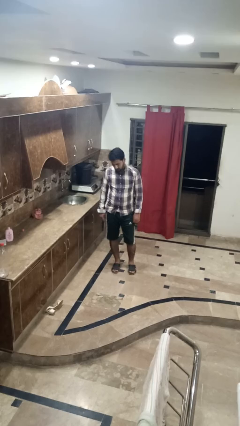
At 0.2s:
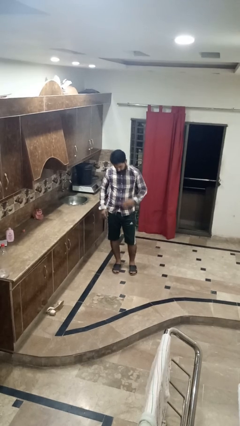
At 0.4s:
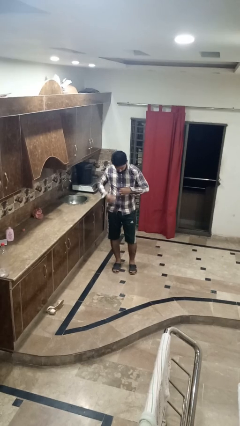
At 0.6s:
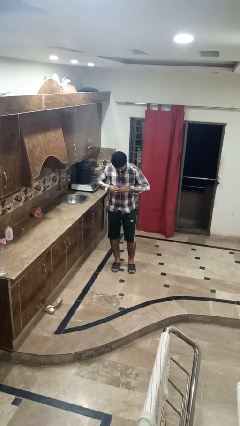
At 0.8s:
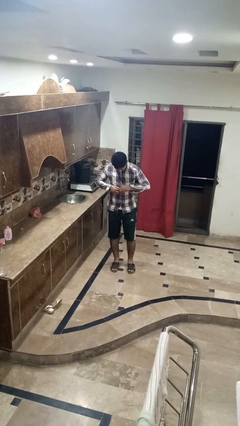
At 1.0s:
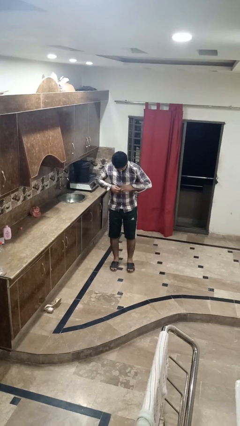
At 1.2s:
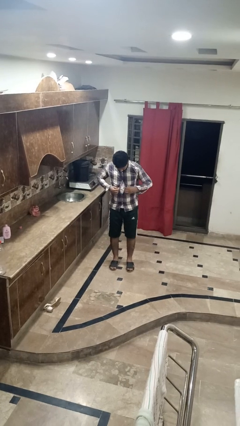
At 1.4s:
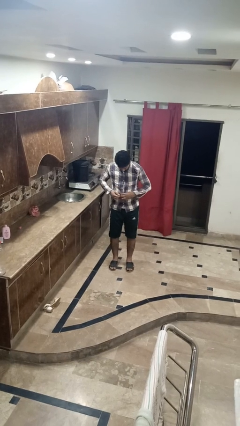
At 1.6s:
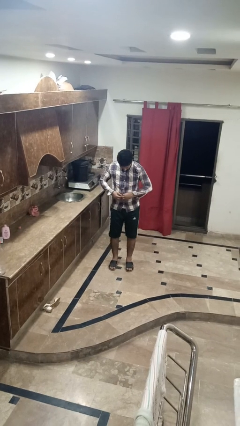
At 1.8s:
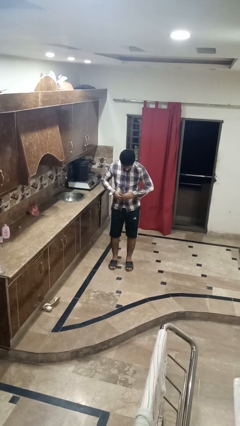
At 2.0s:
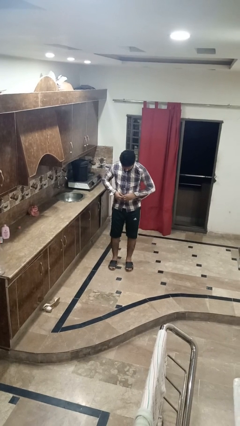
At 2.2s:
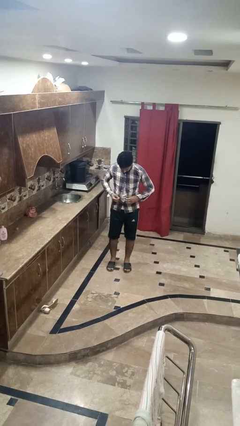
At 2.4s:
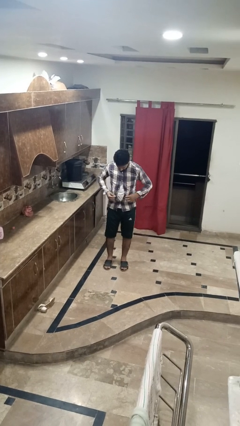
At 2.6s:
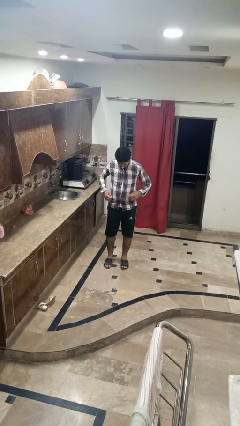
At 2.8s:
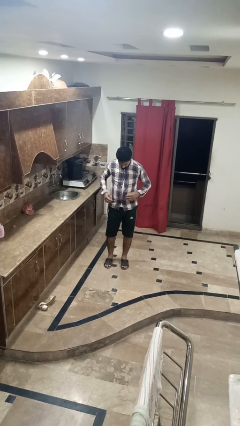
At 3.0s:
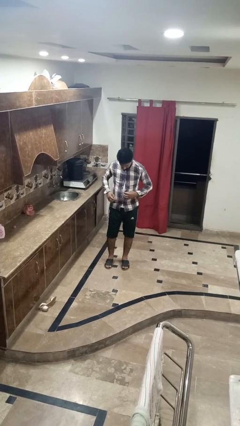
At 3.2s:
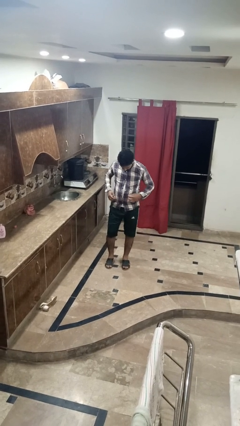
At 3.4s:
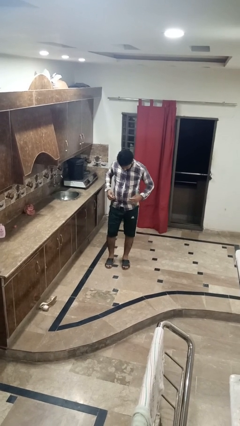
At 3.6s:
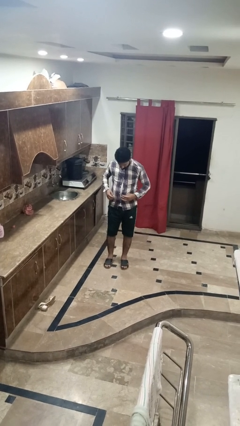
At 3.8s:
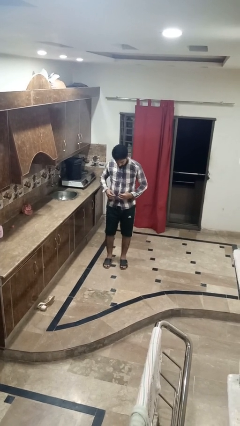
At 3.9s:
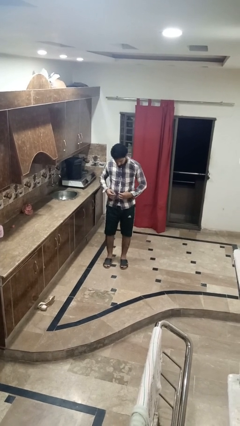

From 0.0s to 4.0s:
person unbuttons shirt

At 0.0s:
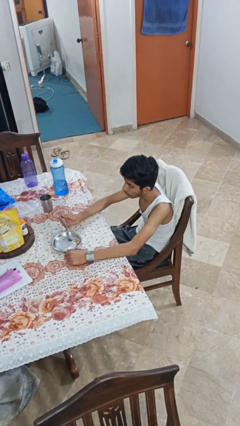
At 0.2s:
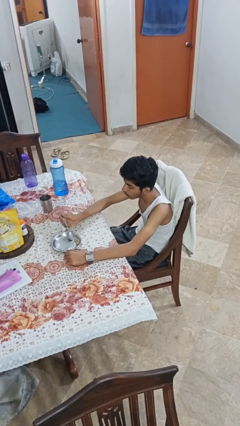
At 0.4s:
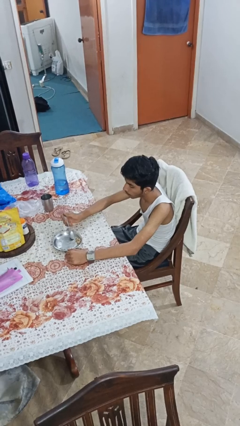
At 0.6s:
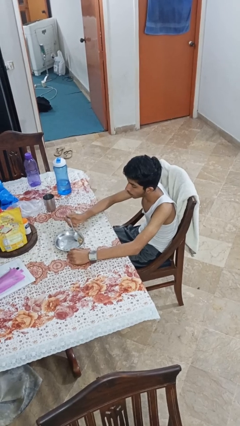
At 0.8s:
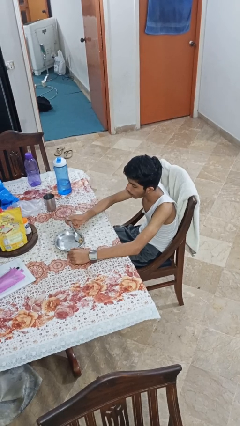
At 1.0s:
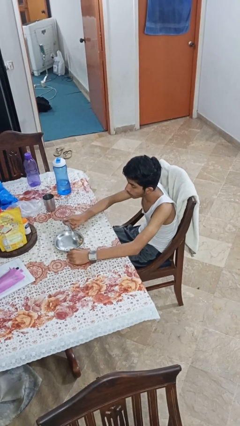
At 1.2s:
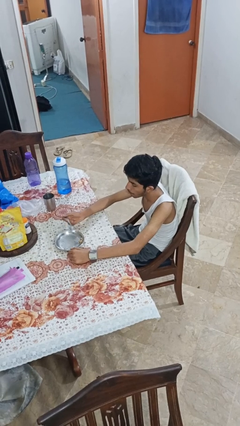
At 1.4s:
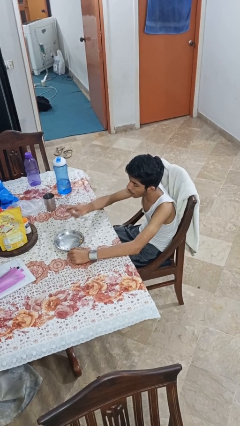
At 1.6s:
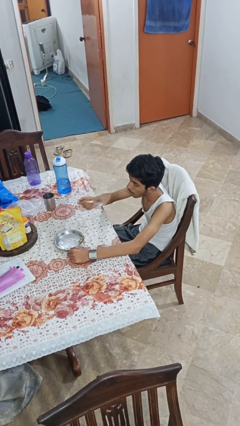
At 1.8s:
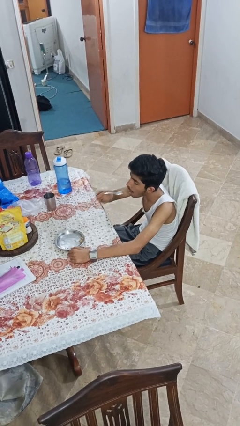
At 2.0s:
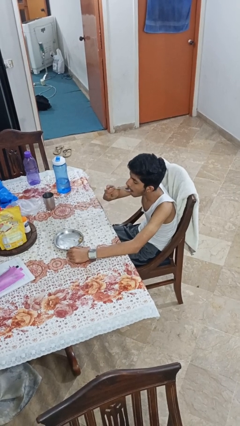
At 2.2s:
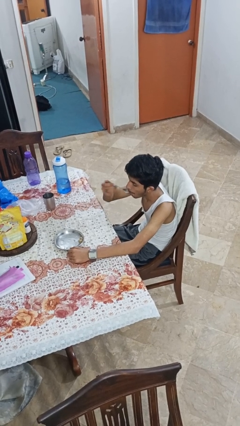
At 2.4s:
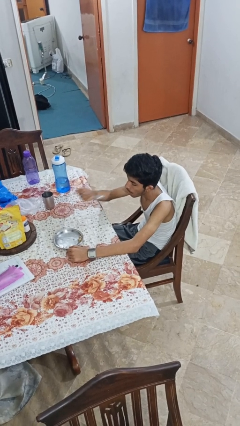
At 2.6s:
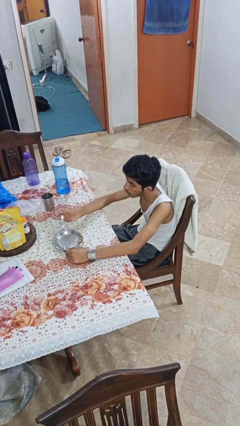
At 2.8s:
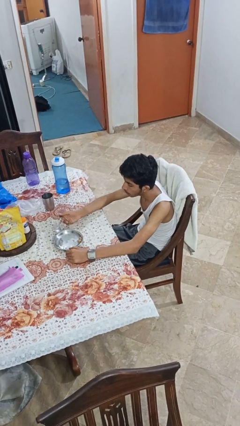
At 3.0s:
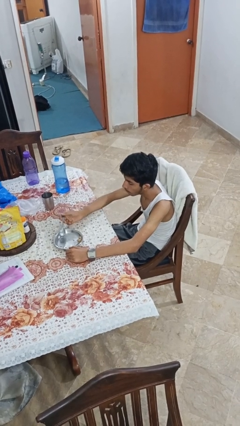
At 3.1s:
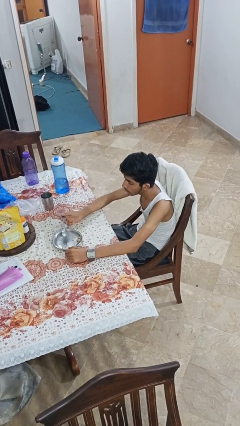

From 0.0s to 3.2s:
person eats with utensil

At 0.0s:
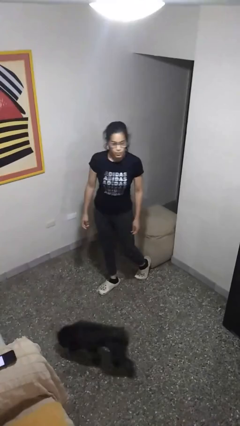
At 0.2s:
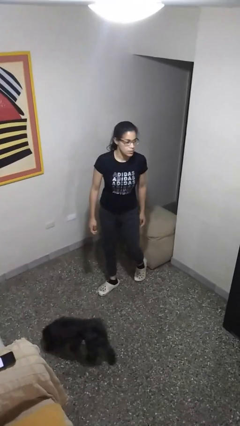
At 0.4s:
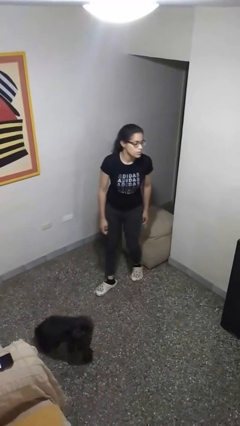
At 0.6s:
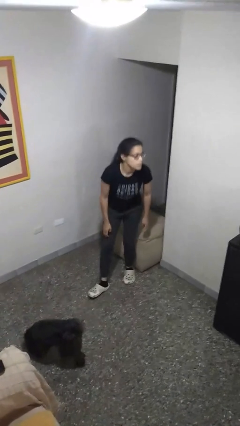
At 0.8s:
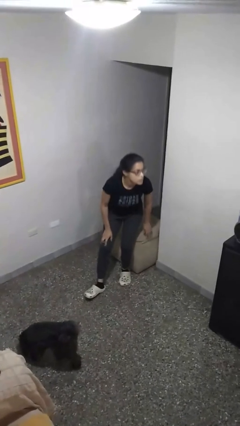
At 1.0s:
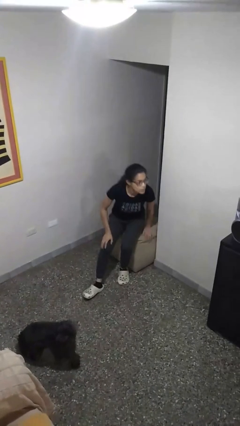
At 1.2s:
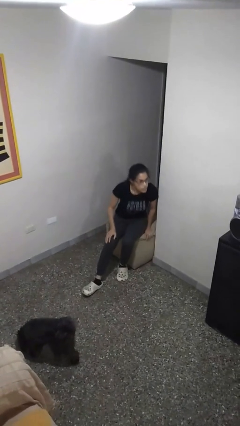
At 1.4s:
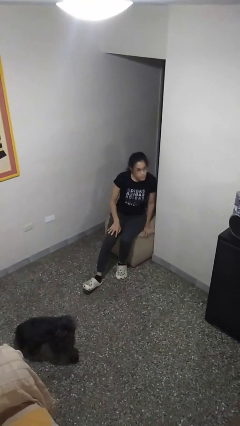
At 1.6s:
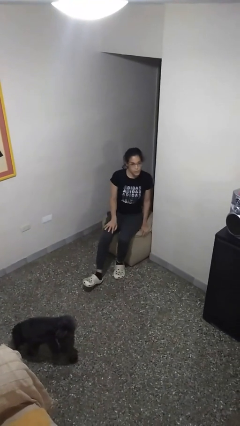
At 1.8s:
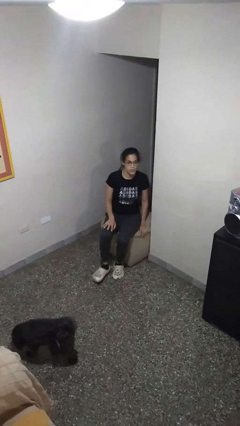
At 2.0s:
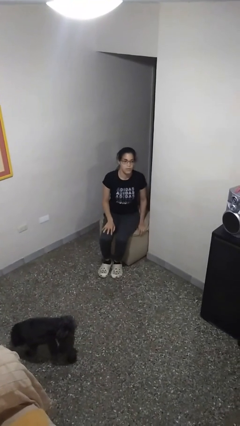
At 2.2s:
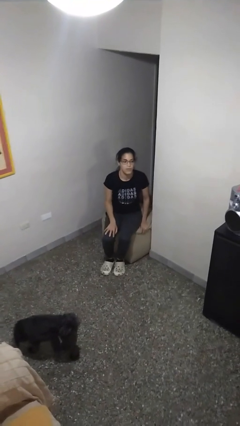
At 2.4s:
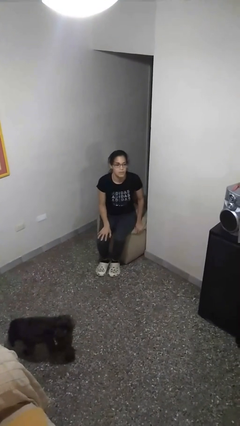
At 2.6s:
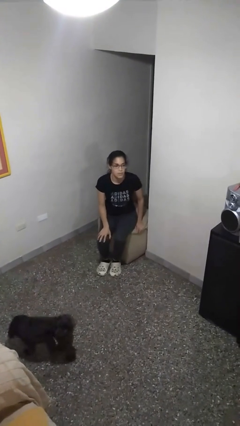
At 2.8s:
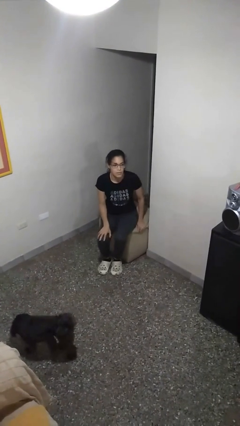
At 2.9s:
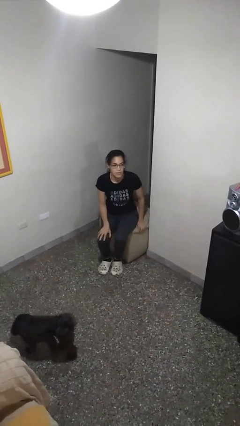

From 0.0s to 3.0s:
person sits down

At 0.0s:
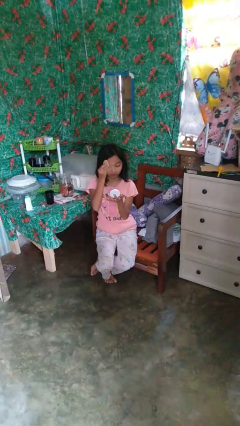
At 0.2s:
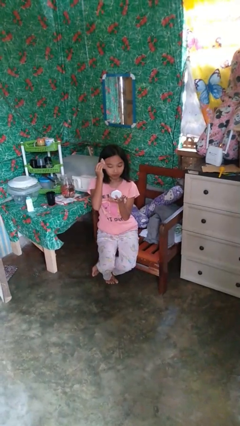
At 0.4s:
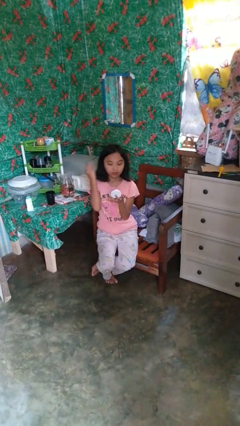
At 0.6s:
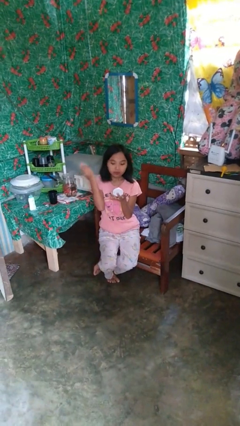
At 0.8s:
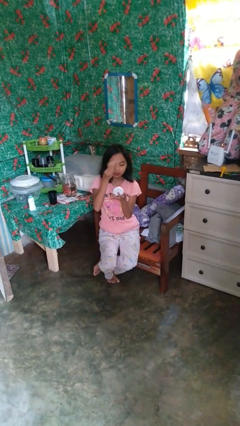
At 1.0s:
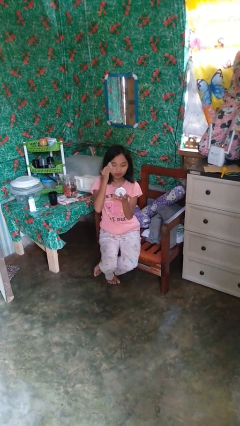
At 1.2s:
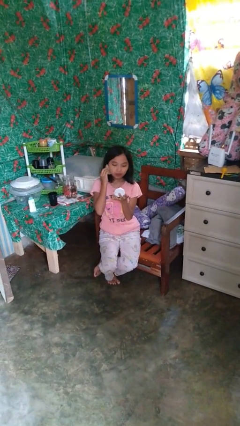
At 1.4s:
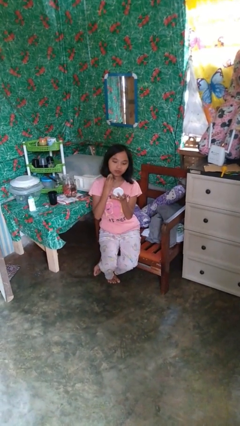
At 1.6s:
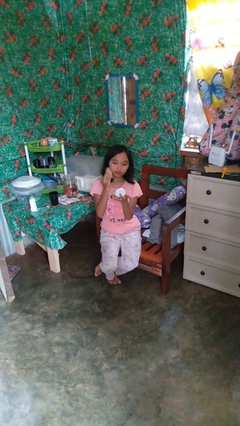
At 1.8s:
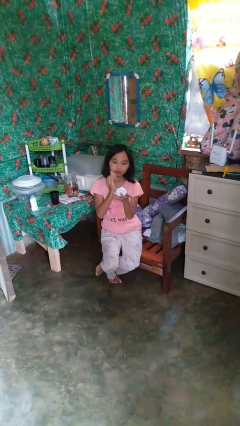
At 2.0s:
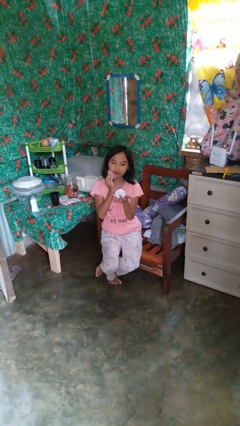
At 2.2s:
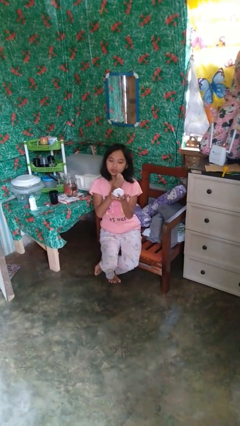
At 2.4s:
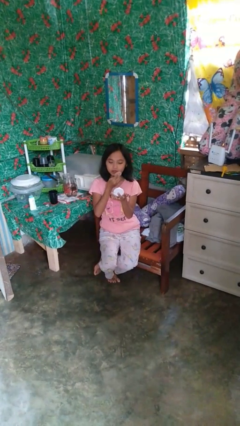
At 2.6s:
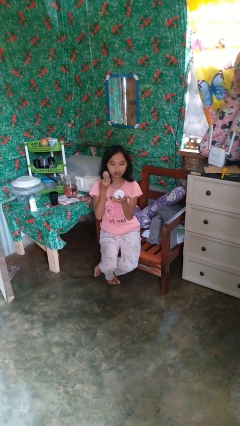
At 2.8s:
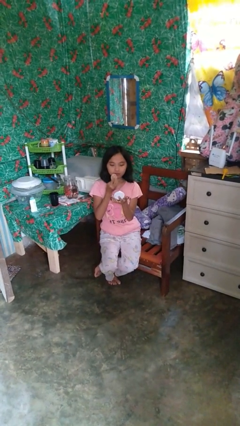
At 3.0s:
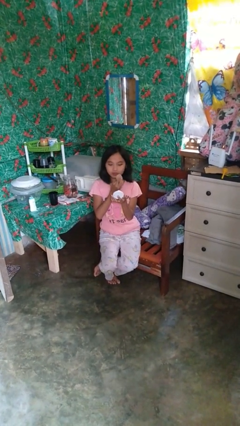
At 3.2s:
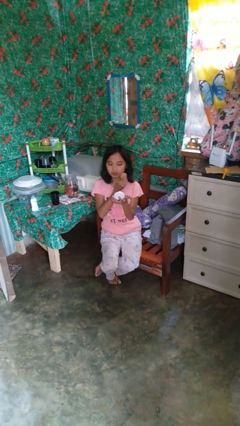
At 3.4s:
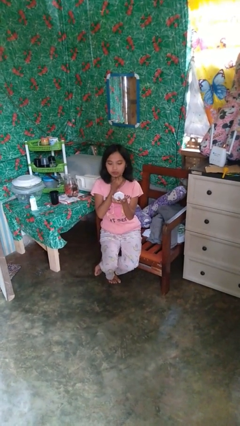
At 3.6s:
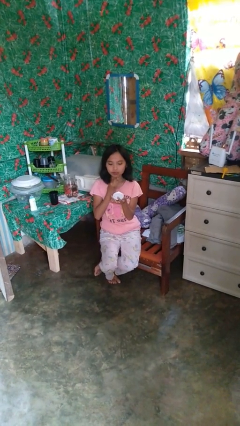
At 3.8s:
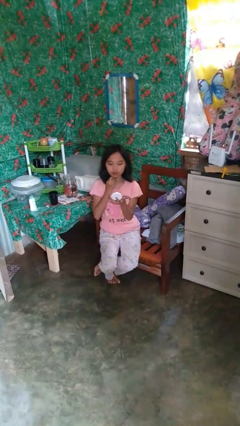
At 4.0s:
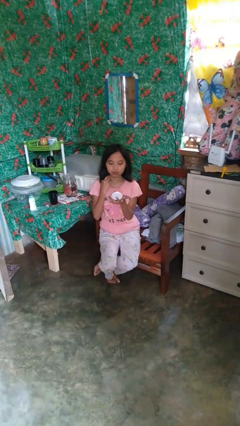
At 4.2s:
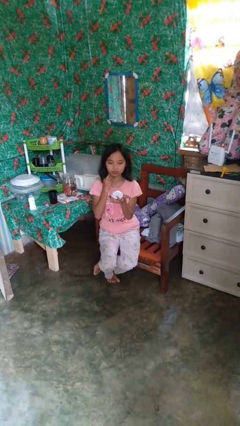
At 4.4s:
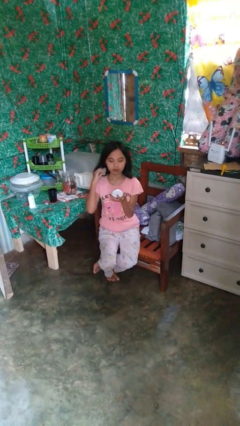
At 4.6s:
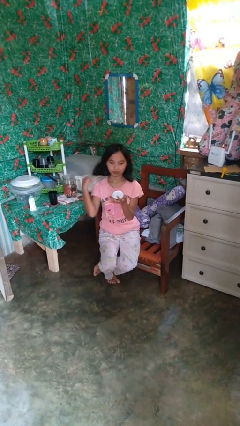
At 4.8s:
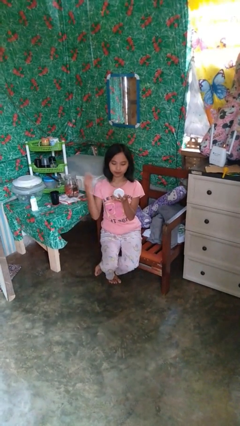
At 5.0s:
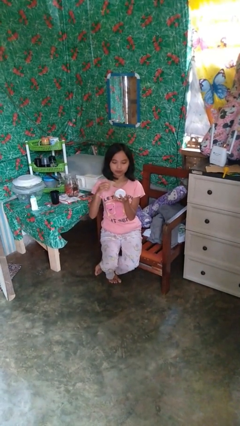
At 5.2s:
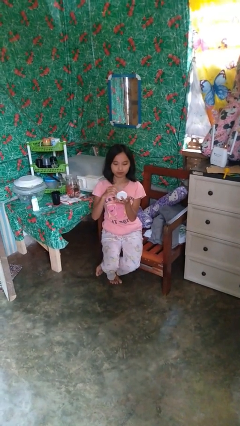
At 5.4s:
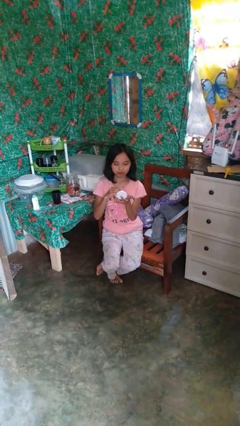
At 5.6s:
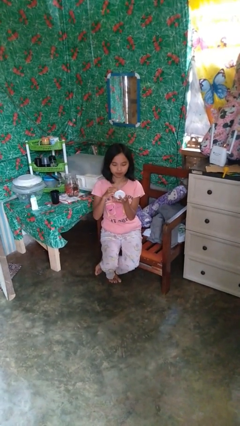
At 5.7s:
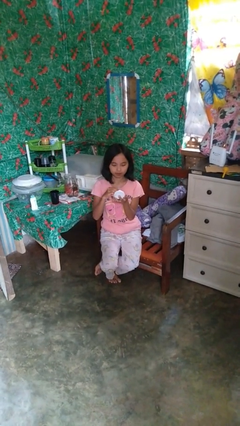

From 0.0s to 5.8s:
person applies foundation makeup

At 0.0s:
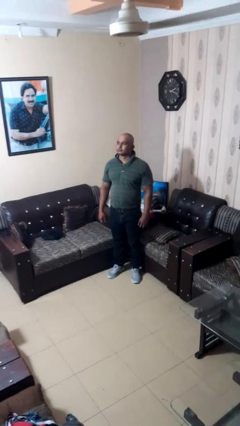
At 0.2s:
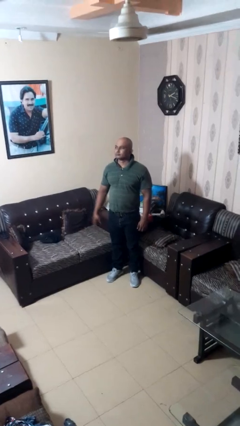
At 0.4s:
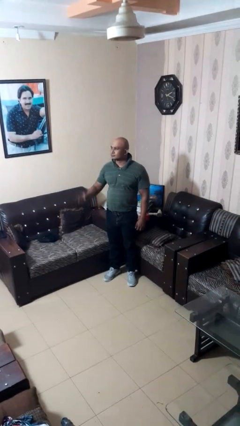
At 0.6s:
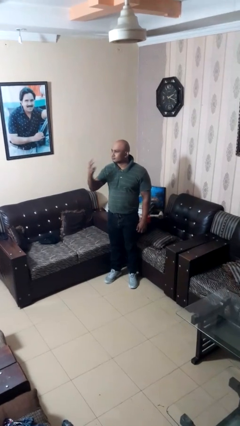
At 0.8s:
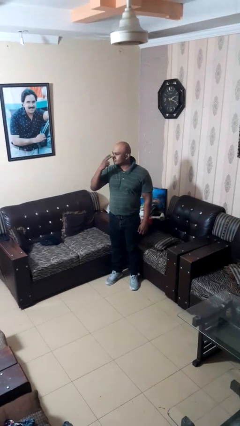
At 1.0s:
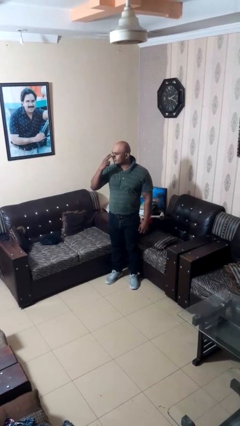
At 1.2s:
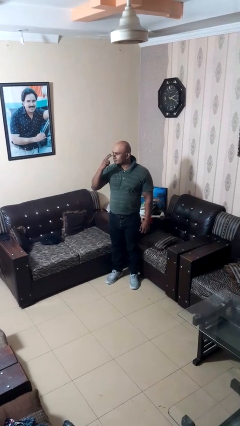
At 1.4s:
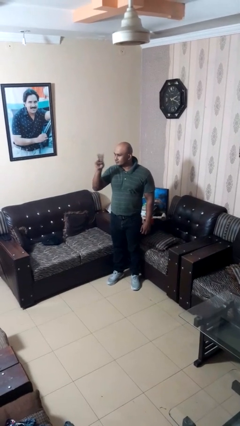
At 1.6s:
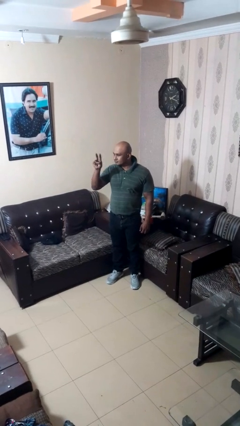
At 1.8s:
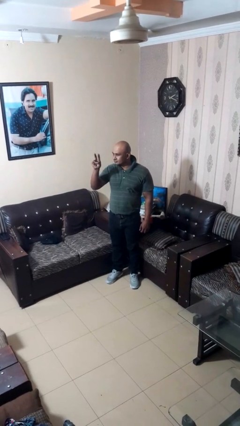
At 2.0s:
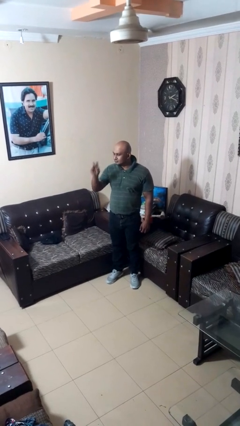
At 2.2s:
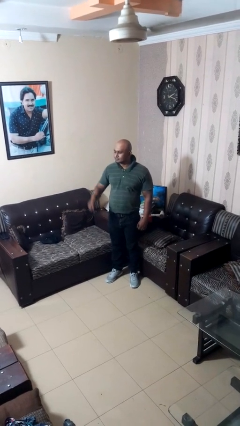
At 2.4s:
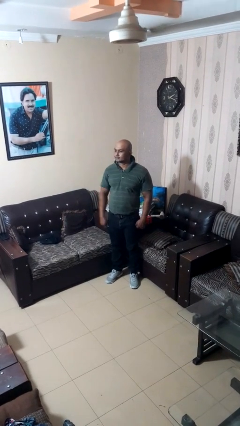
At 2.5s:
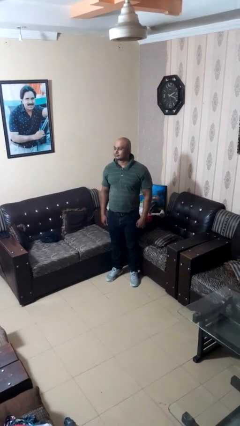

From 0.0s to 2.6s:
person gestures watch closely
